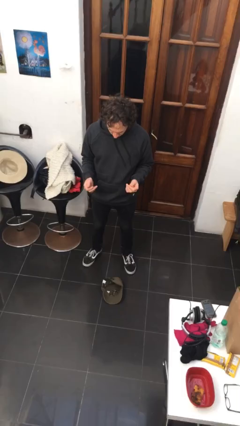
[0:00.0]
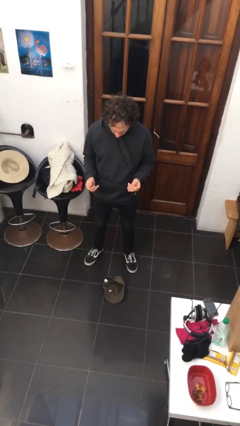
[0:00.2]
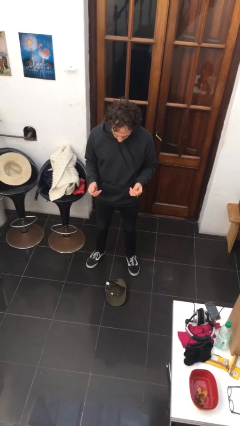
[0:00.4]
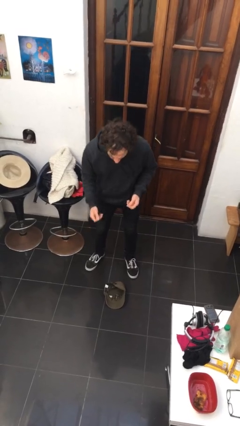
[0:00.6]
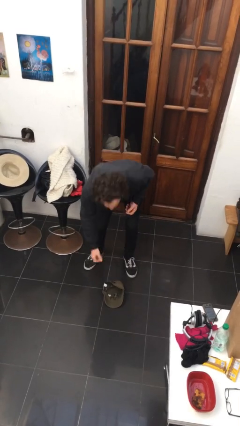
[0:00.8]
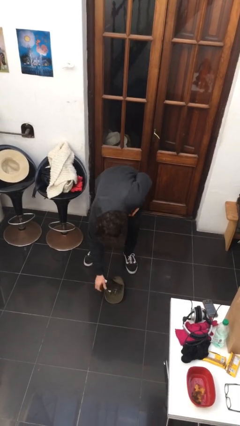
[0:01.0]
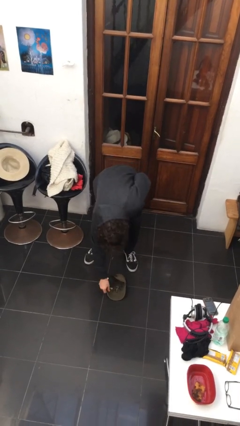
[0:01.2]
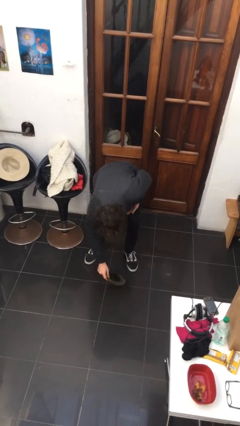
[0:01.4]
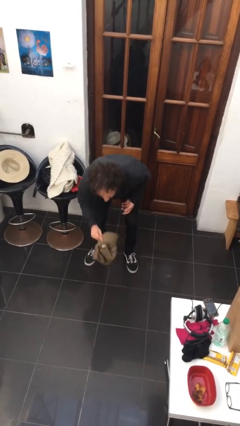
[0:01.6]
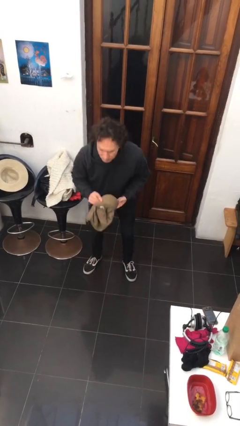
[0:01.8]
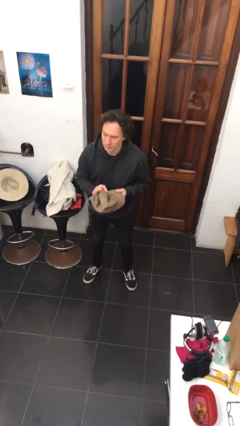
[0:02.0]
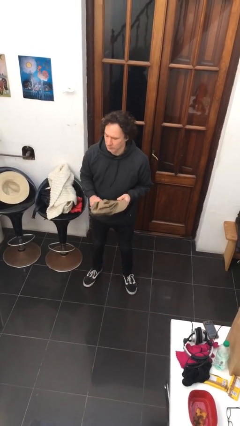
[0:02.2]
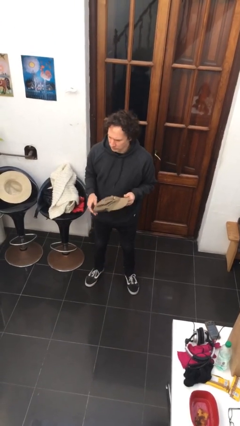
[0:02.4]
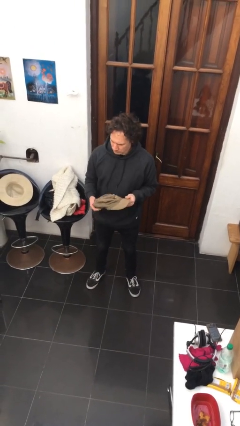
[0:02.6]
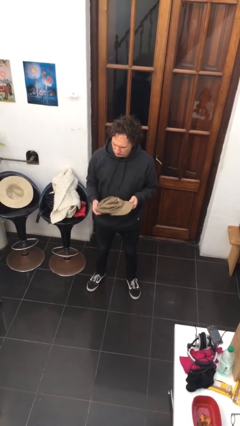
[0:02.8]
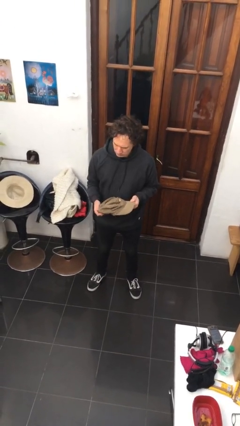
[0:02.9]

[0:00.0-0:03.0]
person picks up object from floor

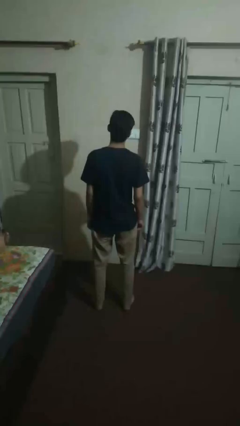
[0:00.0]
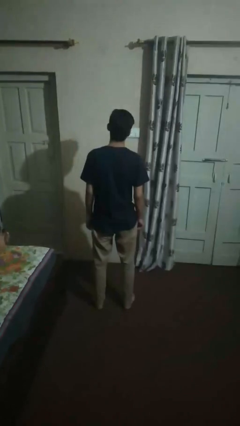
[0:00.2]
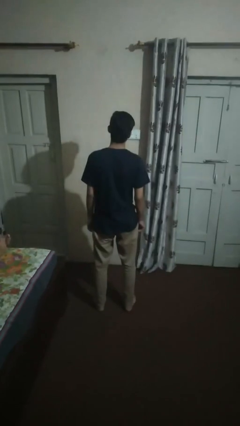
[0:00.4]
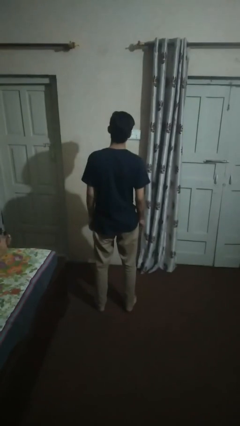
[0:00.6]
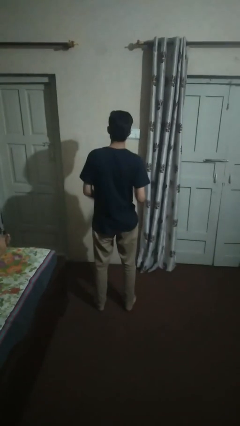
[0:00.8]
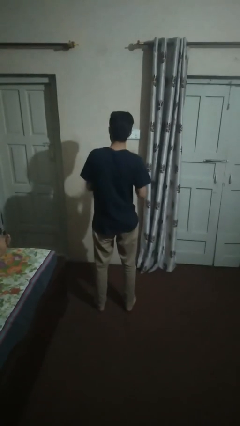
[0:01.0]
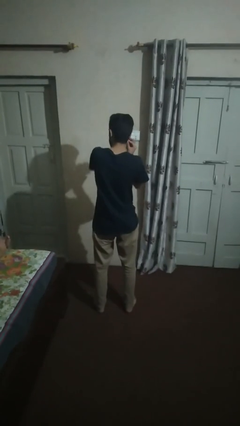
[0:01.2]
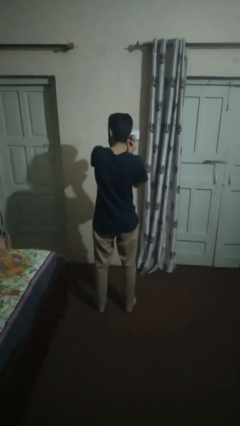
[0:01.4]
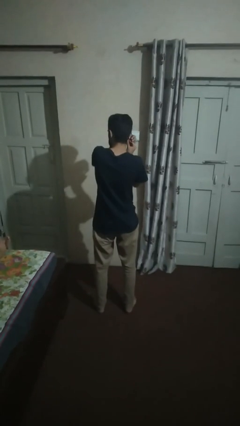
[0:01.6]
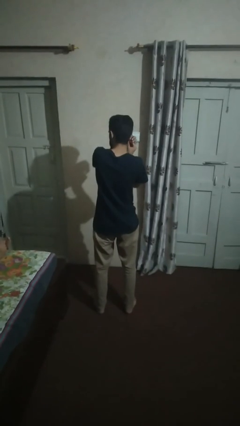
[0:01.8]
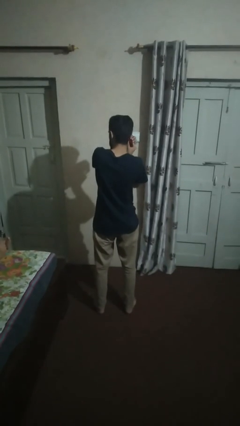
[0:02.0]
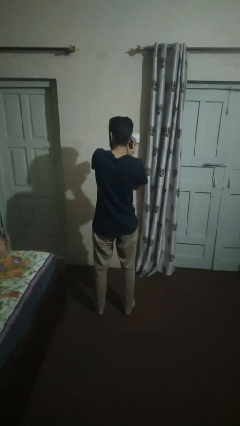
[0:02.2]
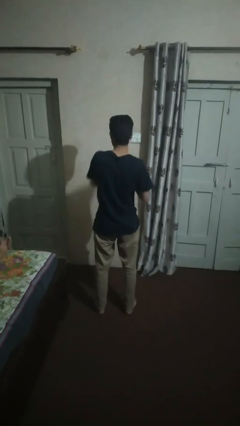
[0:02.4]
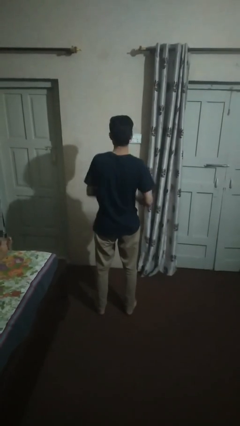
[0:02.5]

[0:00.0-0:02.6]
person puts on earrings

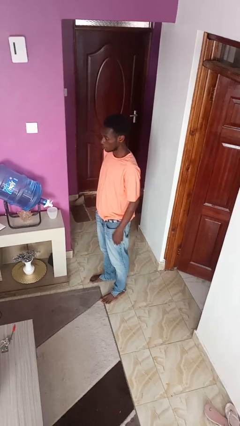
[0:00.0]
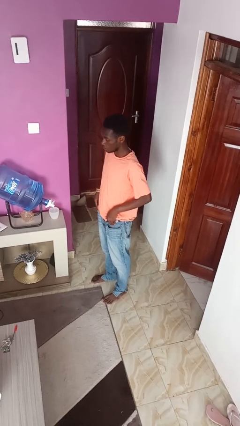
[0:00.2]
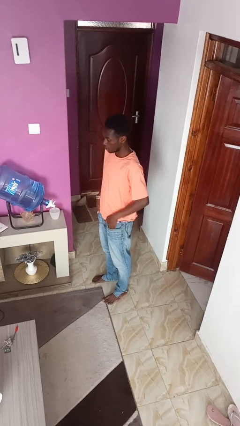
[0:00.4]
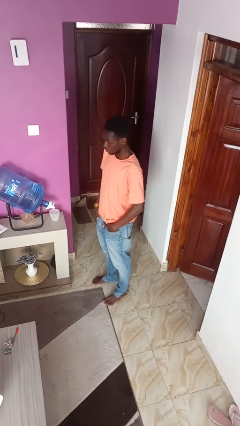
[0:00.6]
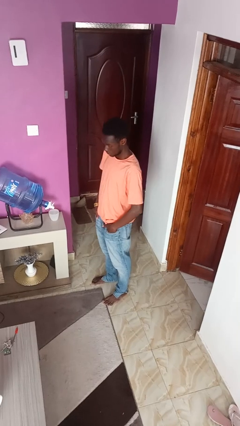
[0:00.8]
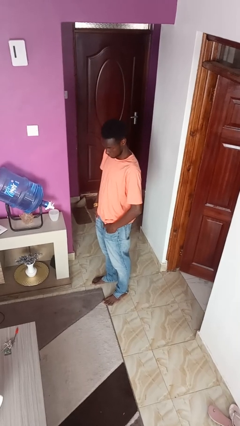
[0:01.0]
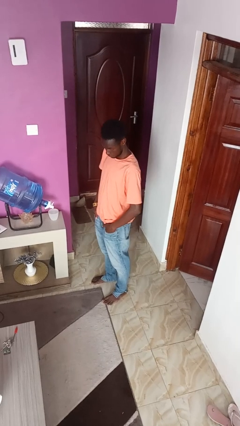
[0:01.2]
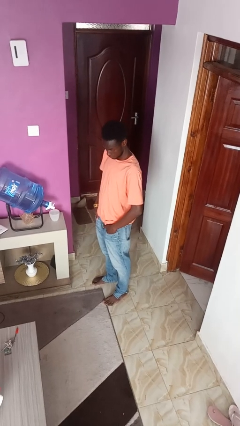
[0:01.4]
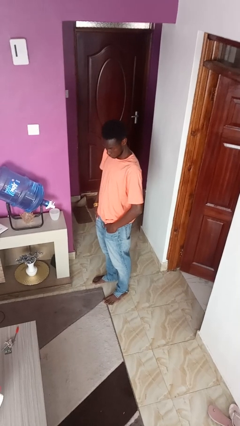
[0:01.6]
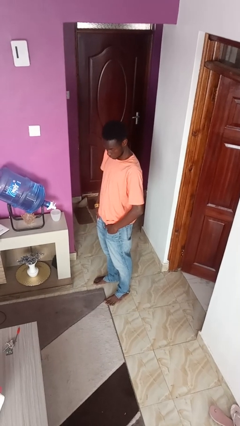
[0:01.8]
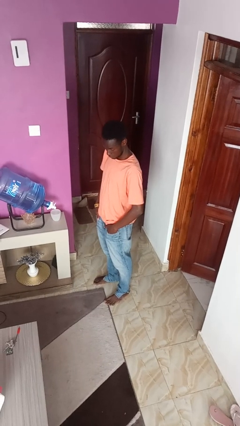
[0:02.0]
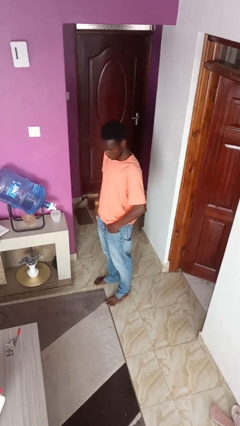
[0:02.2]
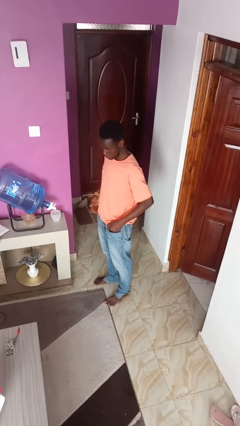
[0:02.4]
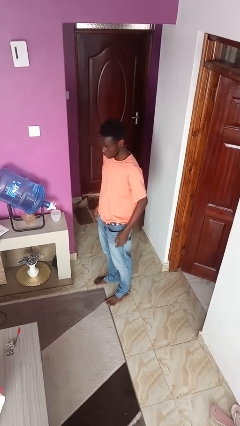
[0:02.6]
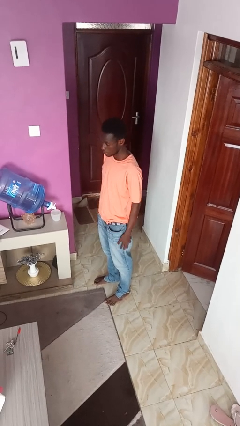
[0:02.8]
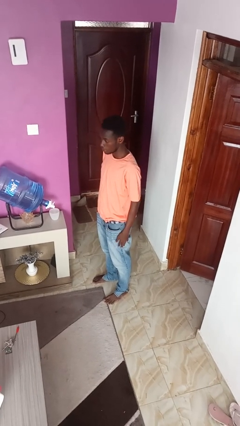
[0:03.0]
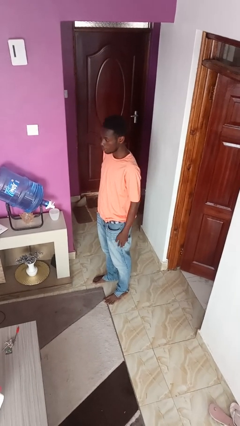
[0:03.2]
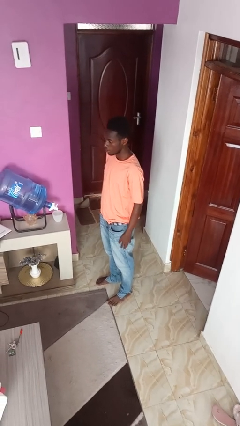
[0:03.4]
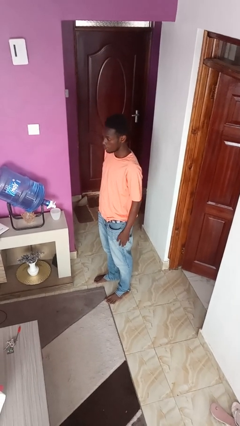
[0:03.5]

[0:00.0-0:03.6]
person puts hands in back pockets

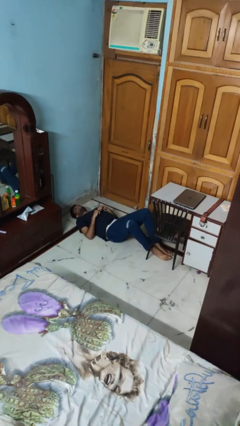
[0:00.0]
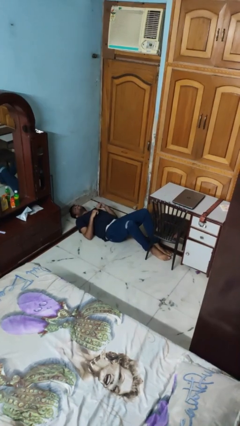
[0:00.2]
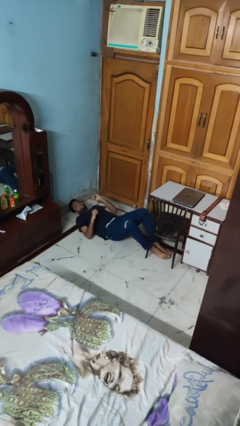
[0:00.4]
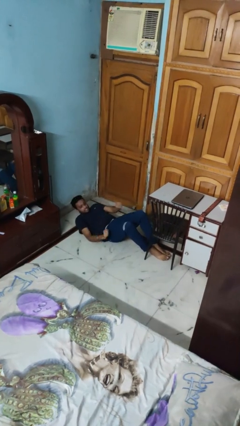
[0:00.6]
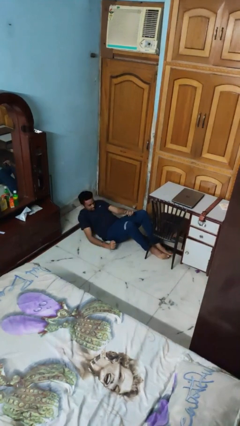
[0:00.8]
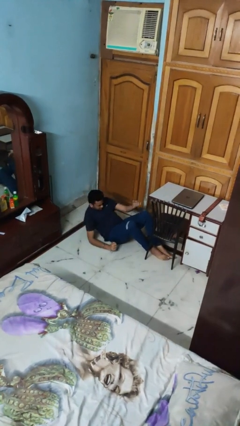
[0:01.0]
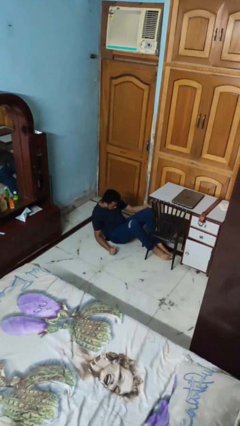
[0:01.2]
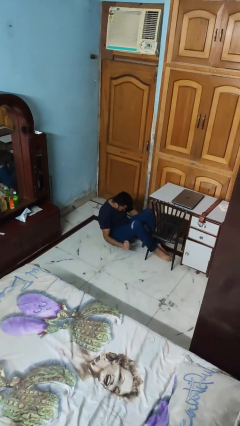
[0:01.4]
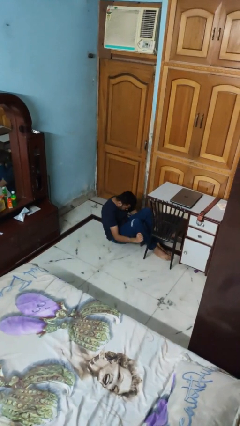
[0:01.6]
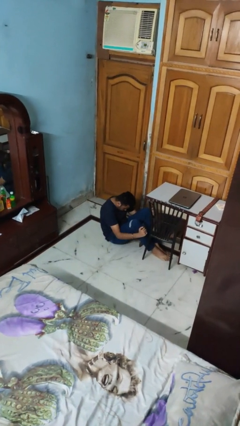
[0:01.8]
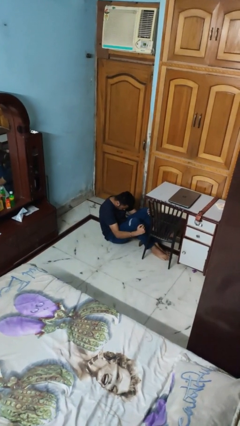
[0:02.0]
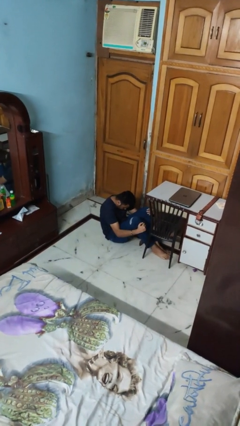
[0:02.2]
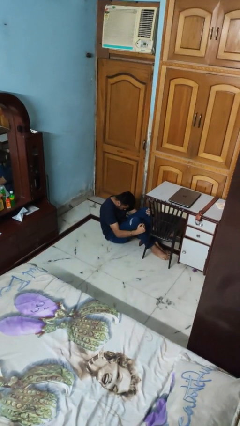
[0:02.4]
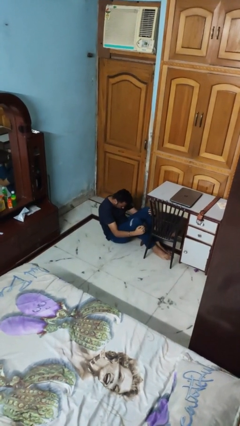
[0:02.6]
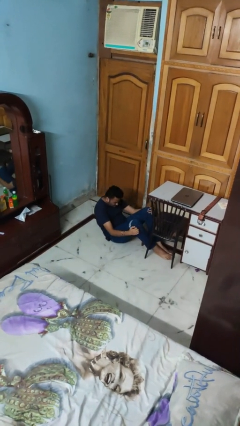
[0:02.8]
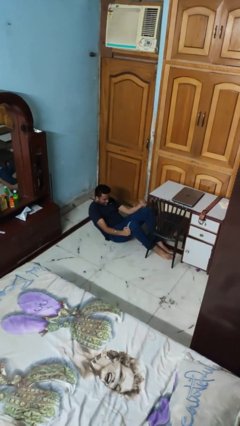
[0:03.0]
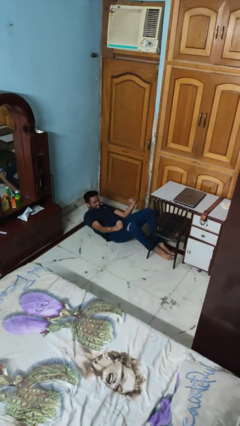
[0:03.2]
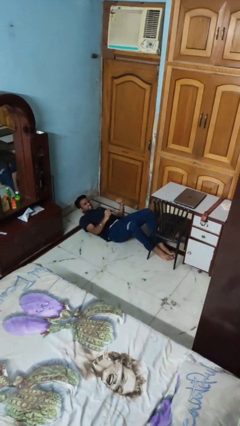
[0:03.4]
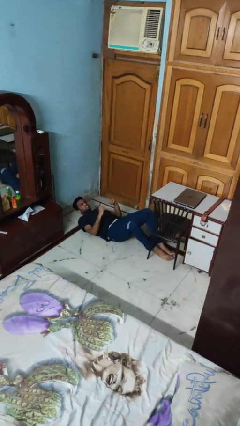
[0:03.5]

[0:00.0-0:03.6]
person exercises with situp

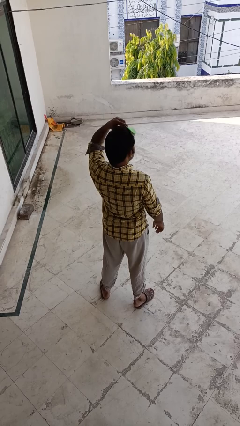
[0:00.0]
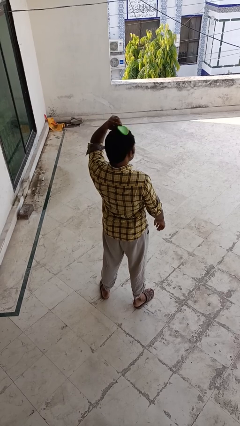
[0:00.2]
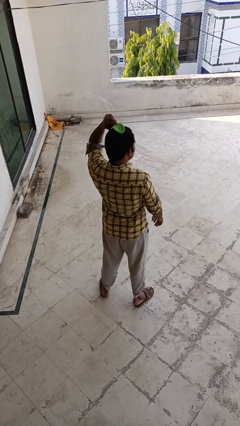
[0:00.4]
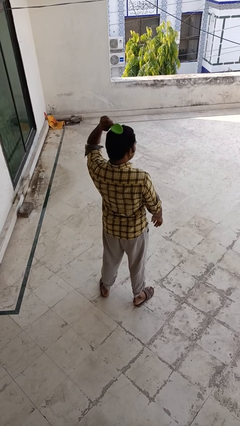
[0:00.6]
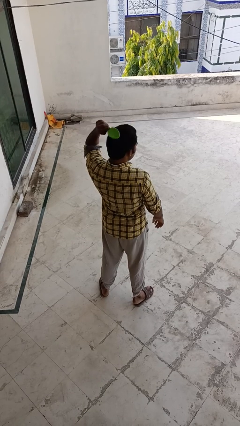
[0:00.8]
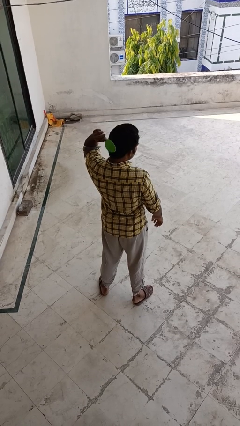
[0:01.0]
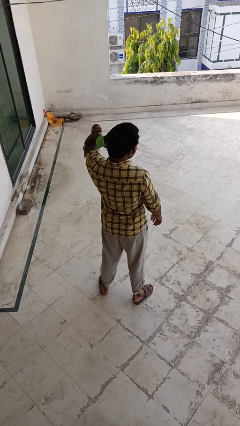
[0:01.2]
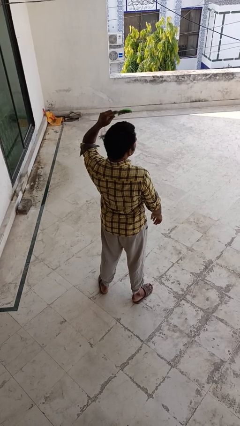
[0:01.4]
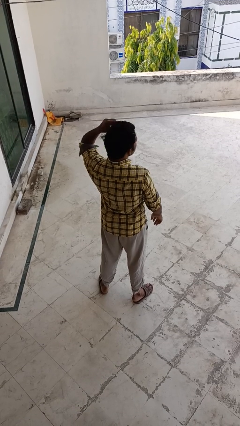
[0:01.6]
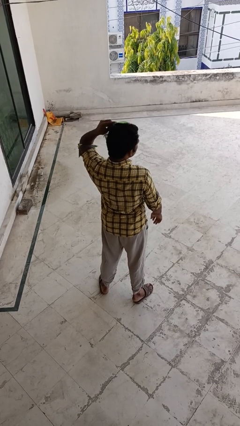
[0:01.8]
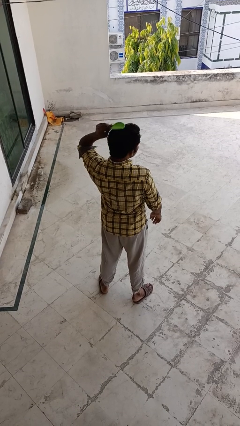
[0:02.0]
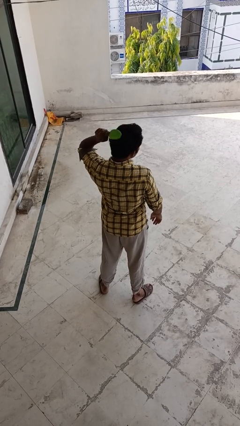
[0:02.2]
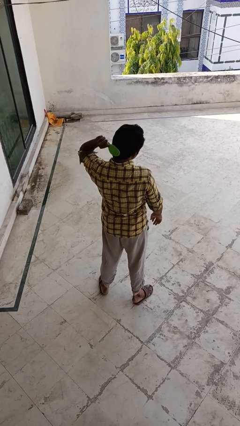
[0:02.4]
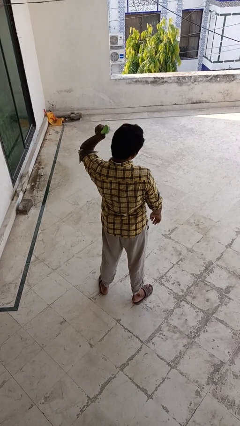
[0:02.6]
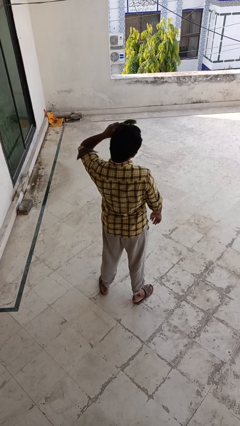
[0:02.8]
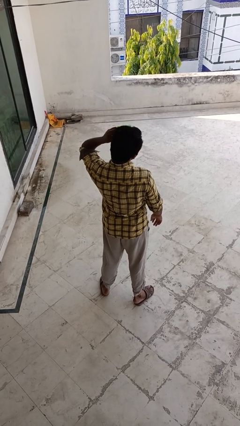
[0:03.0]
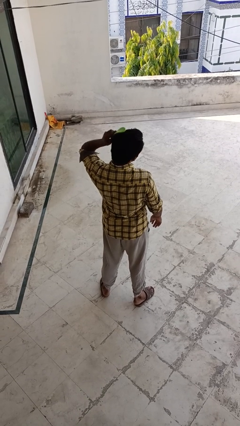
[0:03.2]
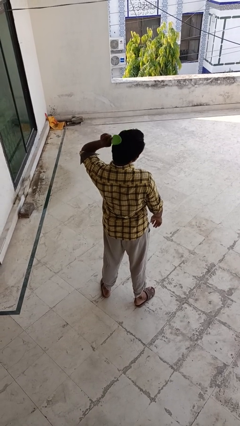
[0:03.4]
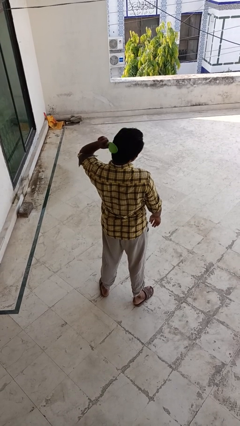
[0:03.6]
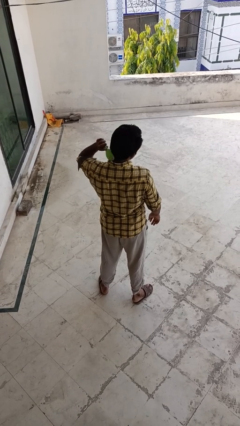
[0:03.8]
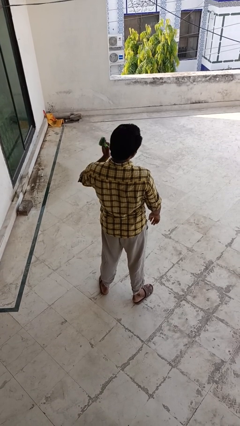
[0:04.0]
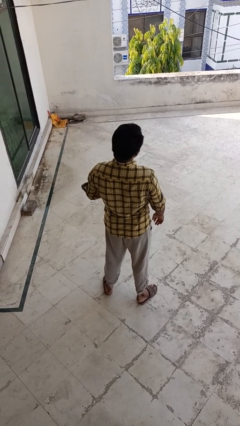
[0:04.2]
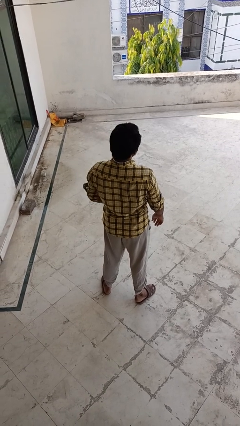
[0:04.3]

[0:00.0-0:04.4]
person brushes hair

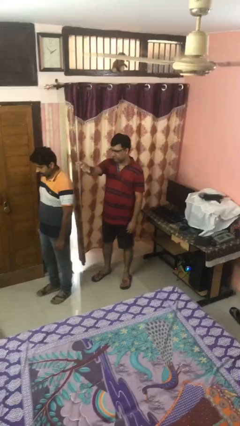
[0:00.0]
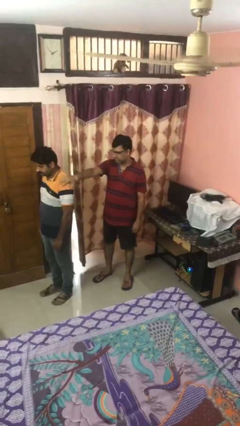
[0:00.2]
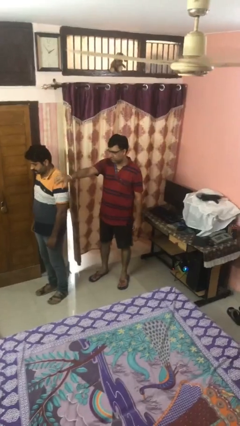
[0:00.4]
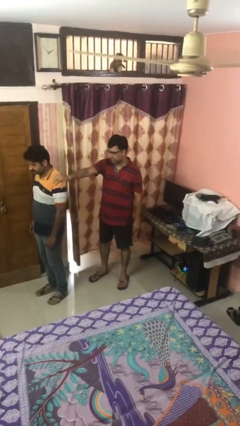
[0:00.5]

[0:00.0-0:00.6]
person grabs person by shoulder
